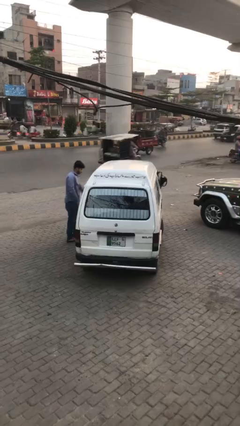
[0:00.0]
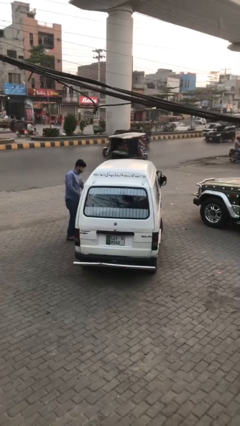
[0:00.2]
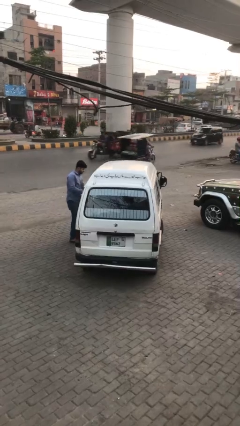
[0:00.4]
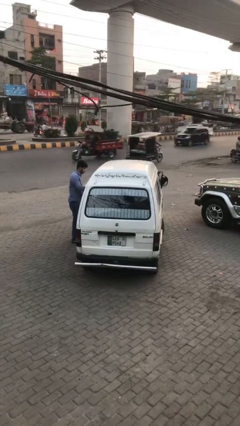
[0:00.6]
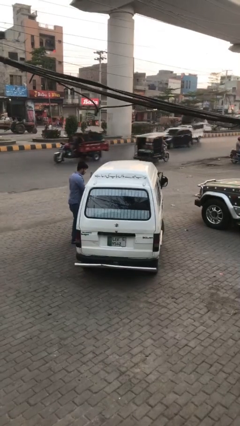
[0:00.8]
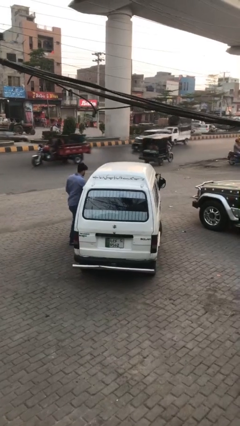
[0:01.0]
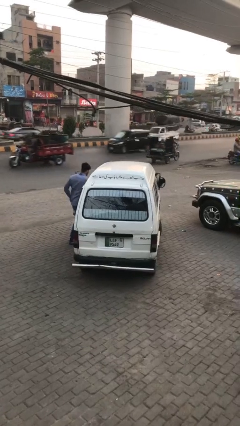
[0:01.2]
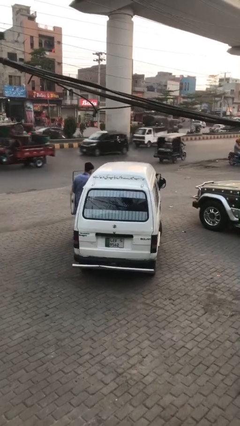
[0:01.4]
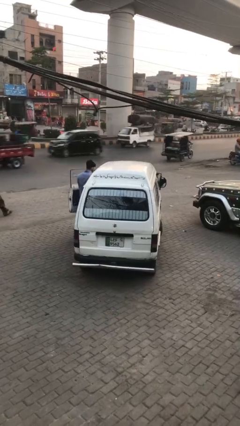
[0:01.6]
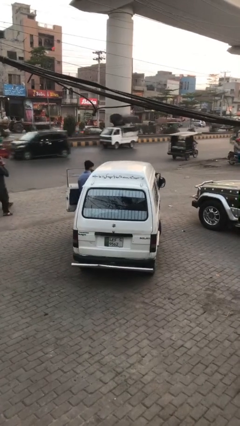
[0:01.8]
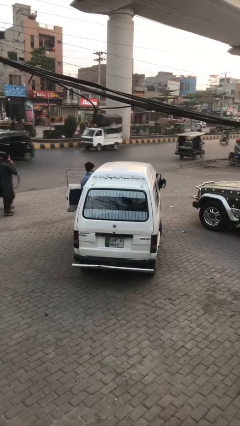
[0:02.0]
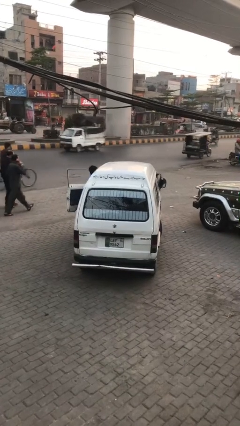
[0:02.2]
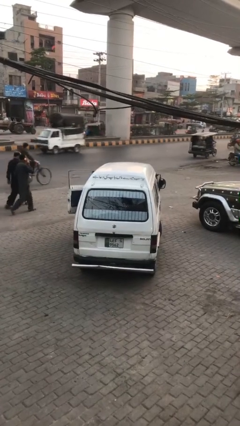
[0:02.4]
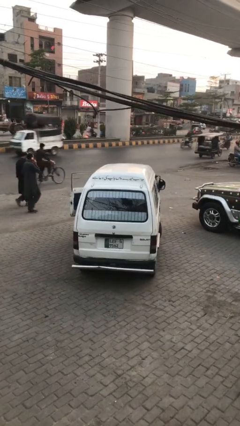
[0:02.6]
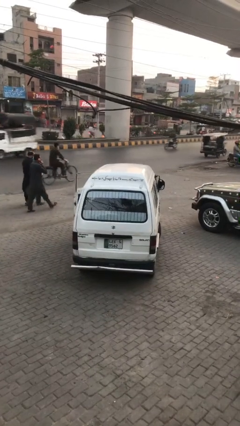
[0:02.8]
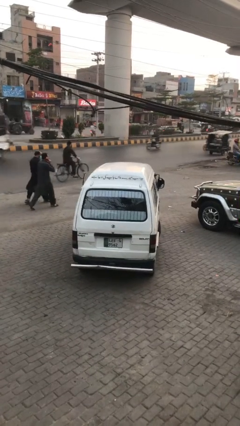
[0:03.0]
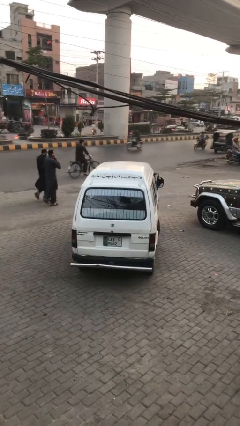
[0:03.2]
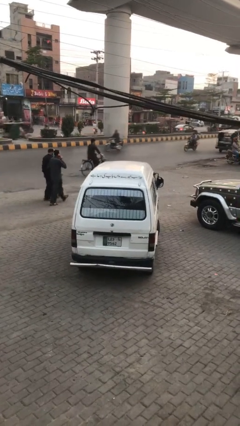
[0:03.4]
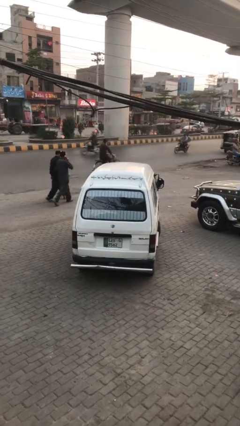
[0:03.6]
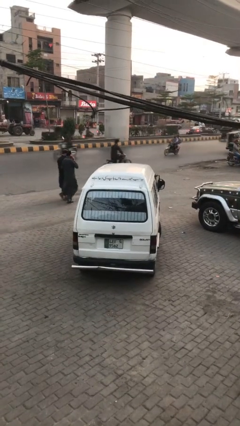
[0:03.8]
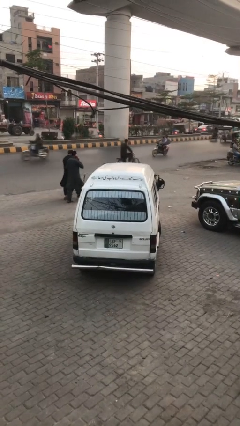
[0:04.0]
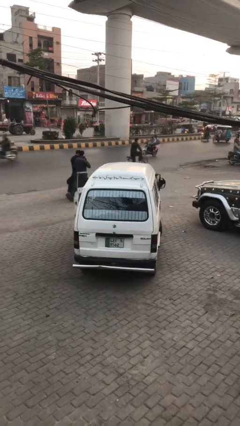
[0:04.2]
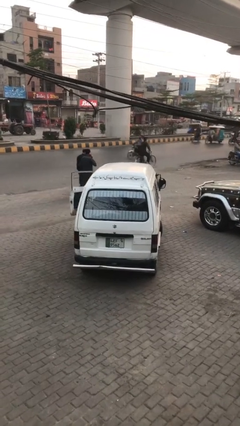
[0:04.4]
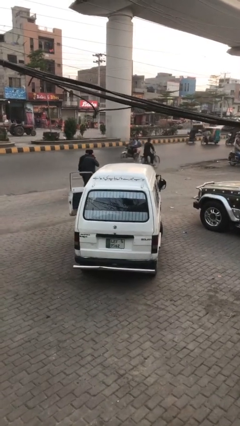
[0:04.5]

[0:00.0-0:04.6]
car picks up person

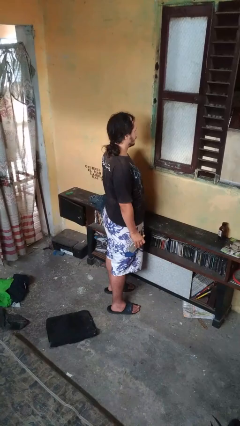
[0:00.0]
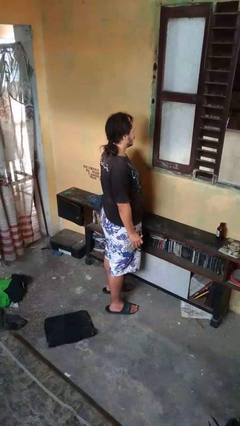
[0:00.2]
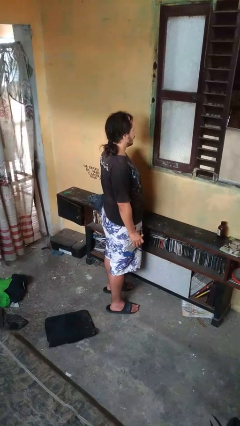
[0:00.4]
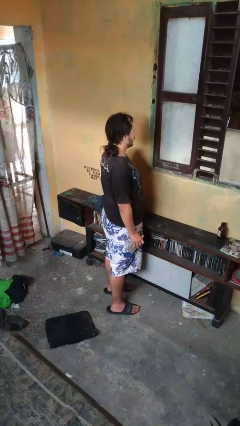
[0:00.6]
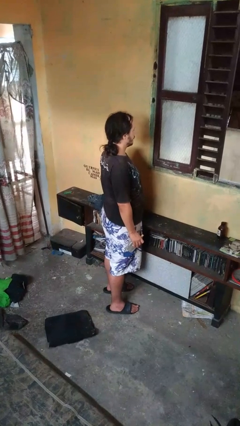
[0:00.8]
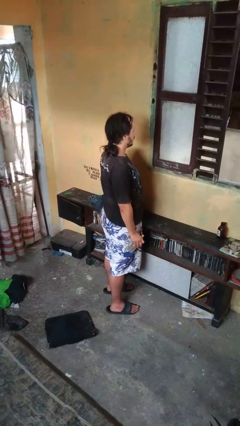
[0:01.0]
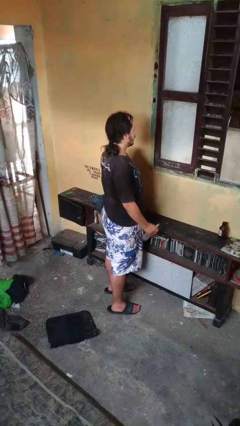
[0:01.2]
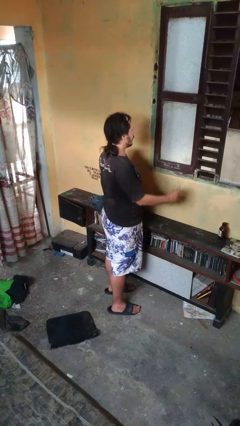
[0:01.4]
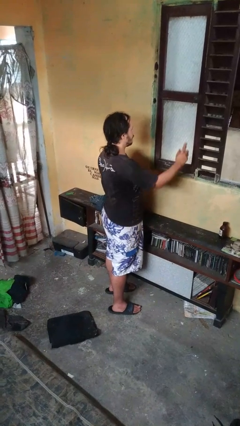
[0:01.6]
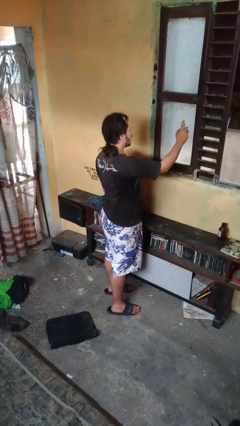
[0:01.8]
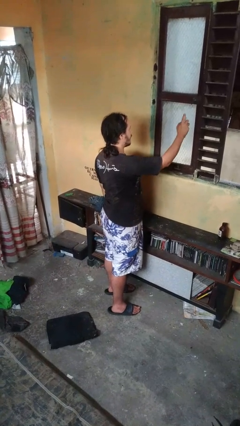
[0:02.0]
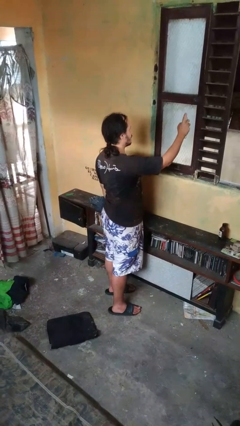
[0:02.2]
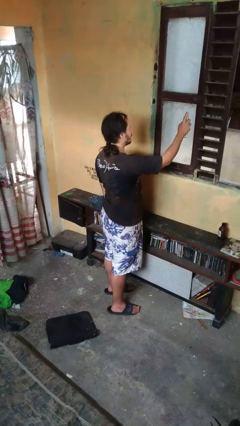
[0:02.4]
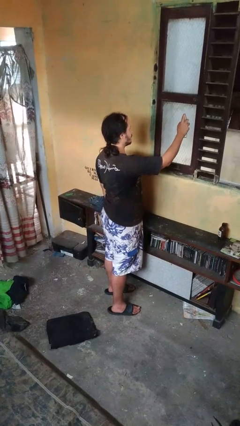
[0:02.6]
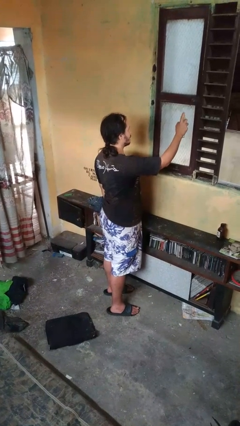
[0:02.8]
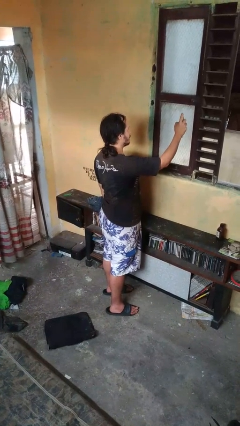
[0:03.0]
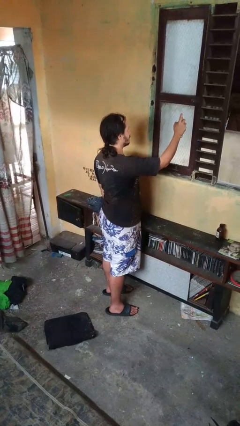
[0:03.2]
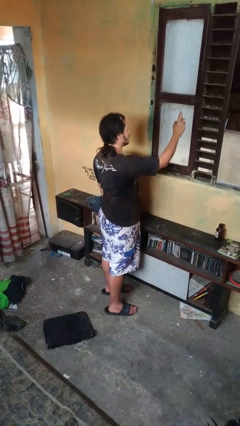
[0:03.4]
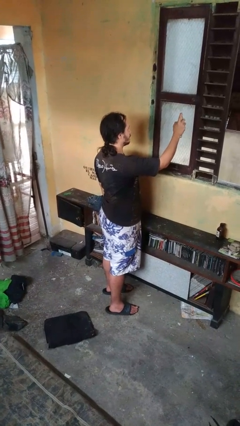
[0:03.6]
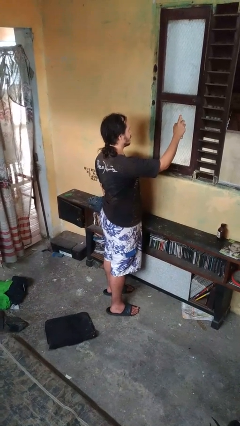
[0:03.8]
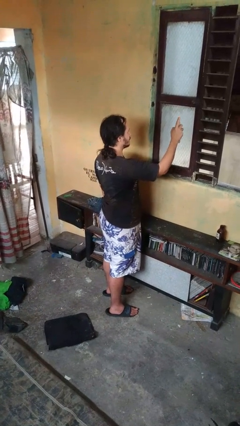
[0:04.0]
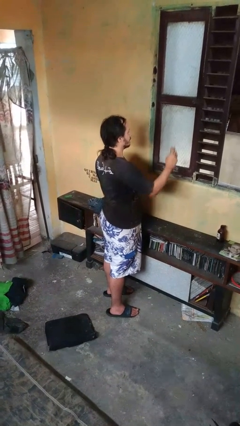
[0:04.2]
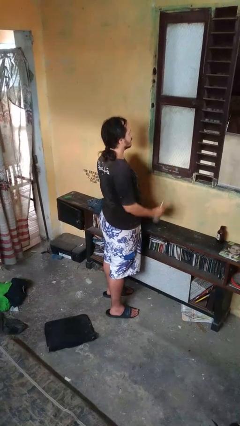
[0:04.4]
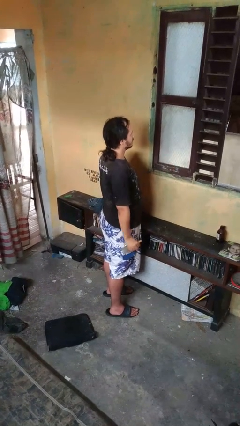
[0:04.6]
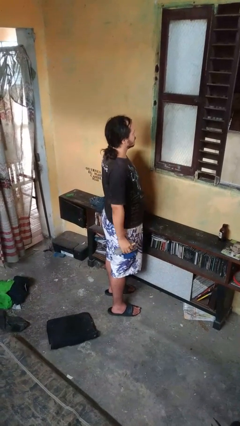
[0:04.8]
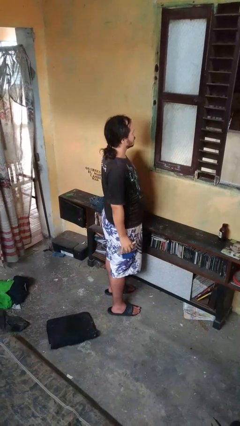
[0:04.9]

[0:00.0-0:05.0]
person sprays from bottle

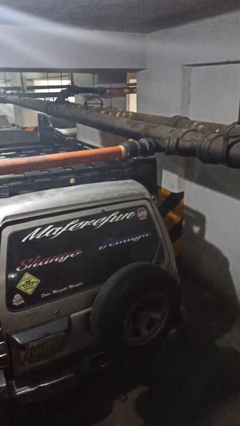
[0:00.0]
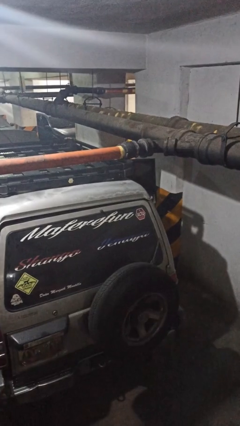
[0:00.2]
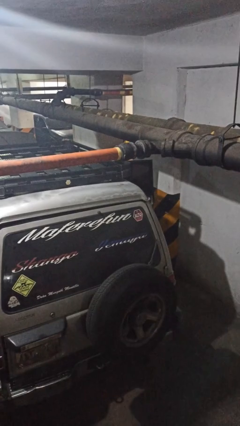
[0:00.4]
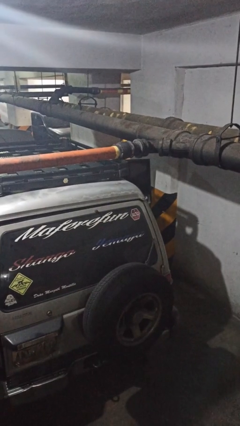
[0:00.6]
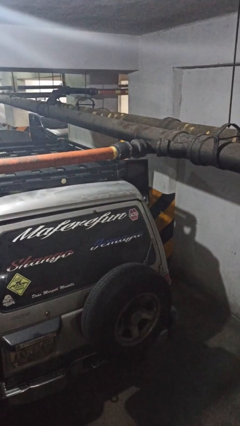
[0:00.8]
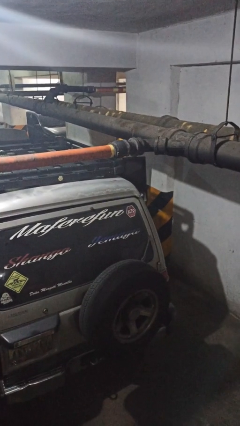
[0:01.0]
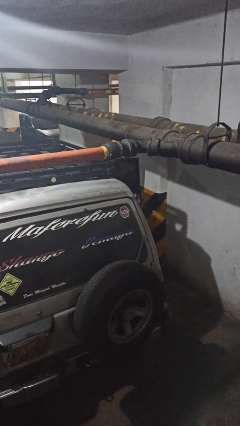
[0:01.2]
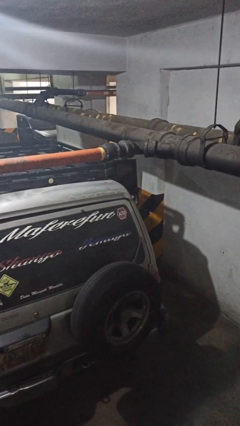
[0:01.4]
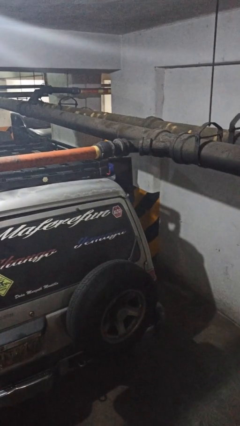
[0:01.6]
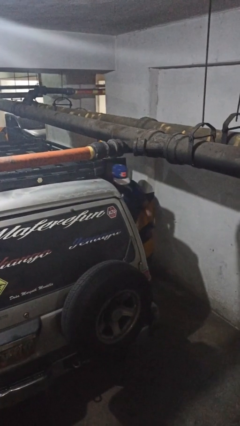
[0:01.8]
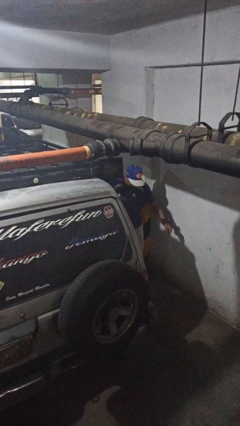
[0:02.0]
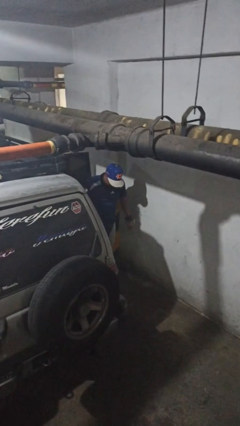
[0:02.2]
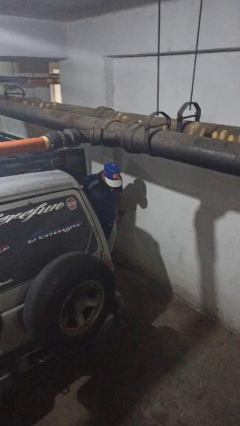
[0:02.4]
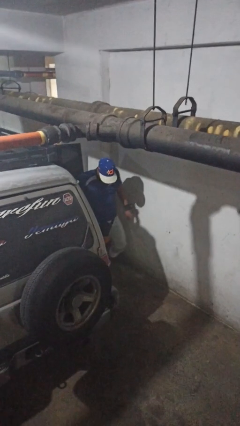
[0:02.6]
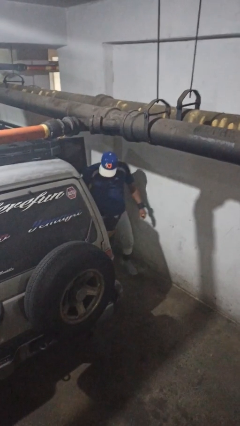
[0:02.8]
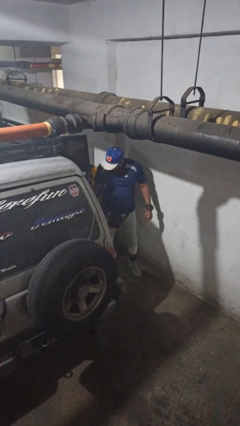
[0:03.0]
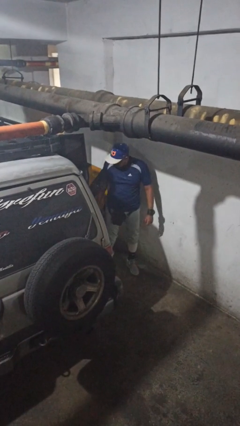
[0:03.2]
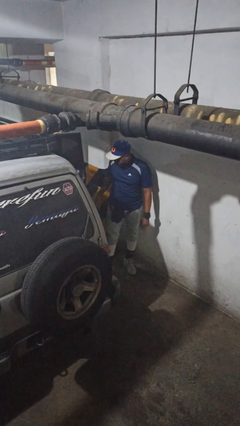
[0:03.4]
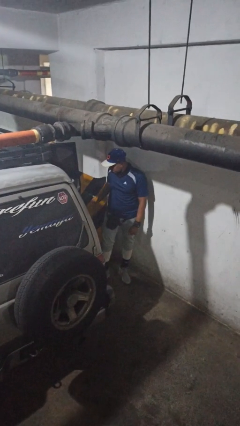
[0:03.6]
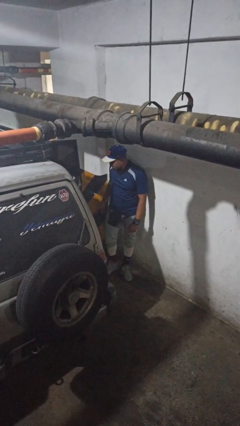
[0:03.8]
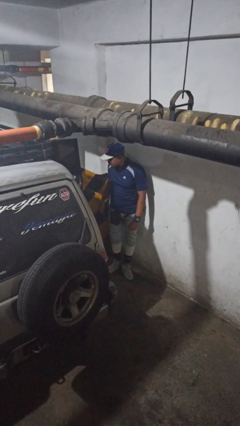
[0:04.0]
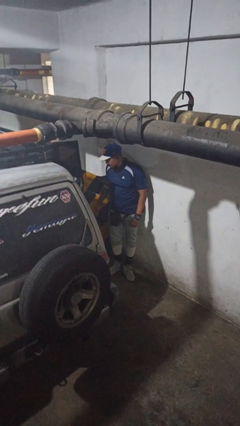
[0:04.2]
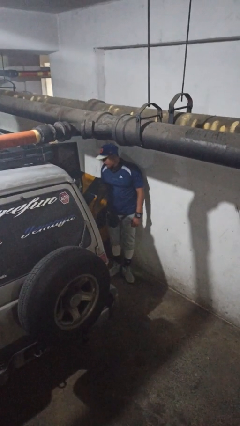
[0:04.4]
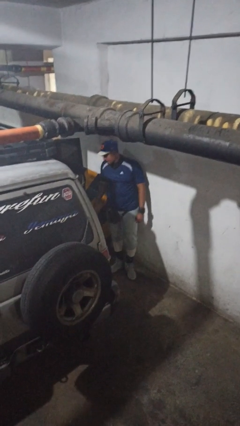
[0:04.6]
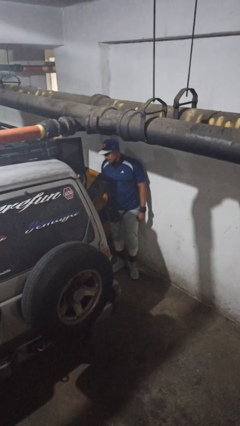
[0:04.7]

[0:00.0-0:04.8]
person exits car

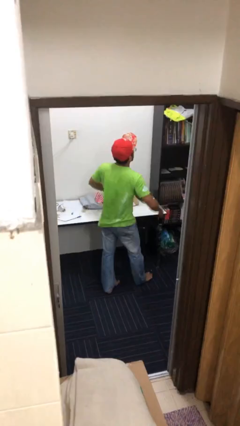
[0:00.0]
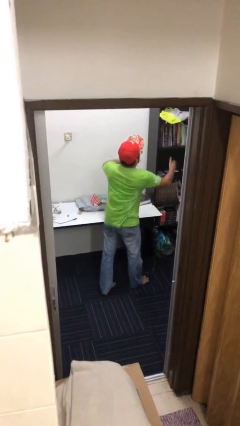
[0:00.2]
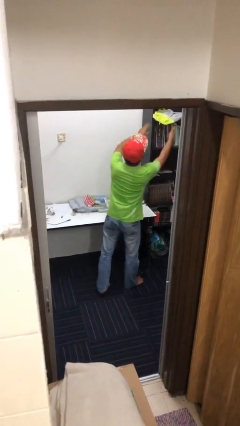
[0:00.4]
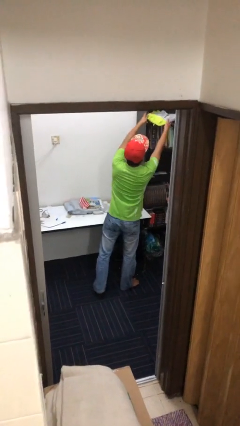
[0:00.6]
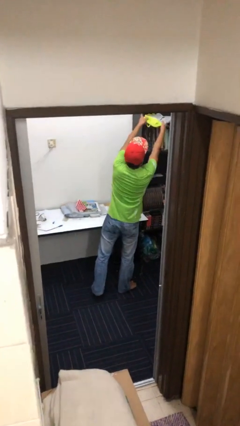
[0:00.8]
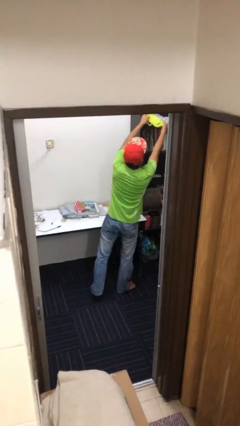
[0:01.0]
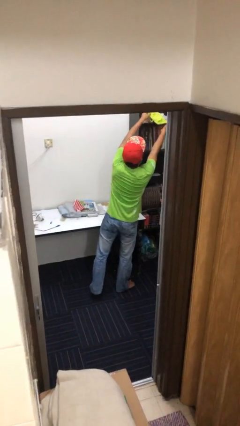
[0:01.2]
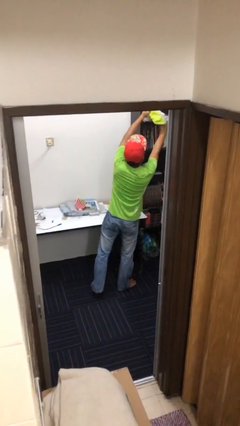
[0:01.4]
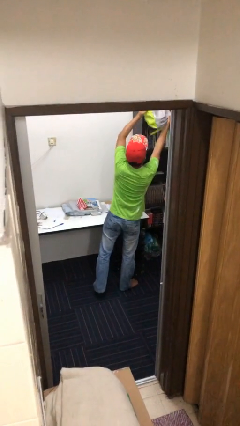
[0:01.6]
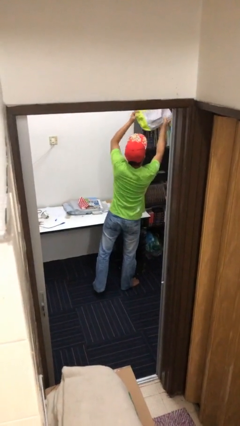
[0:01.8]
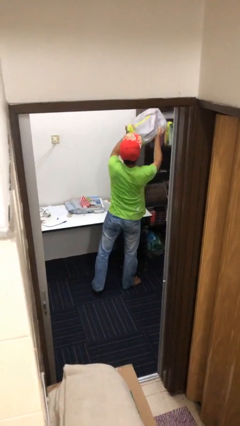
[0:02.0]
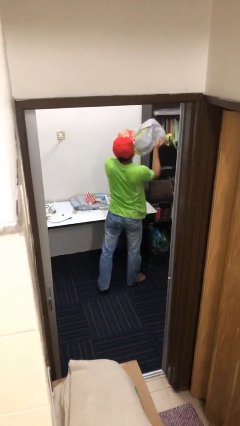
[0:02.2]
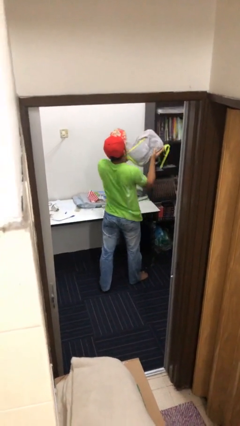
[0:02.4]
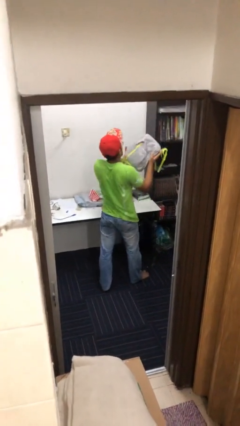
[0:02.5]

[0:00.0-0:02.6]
person picks up object from shelf

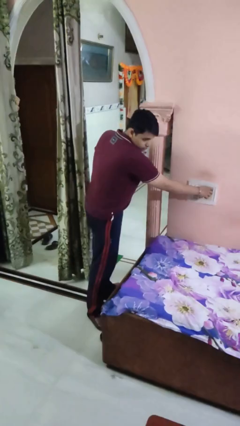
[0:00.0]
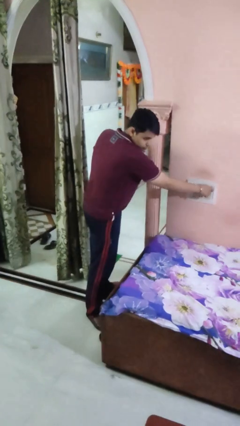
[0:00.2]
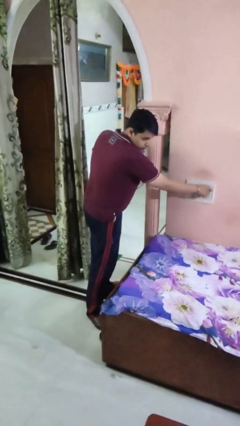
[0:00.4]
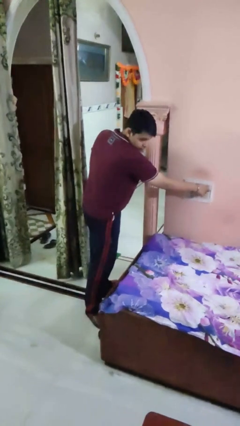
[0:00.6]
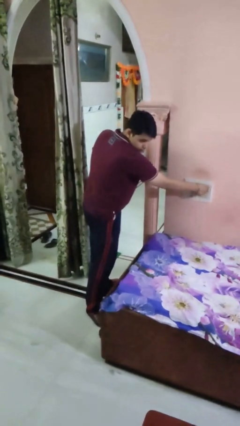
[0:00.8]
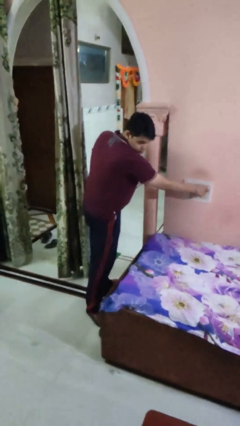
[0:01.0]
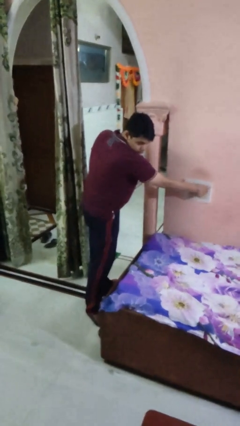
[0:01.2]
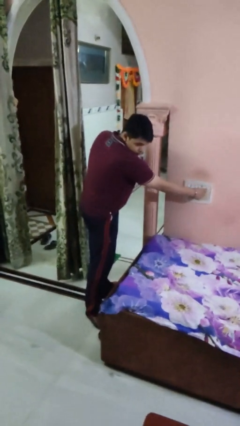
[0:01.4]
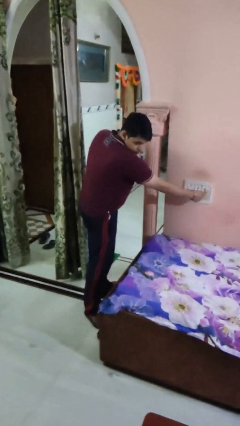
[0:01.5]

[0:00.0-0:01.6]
person adjusts thermostat
